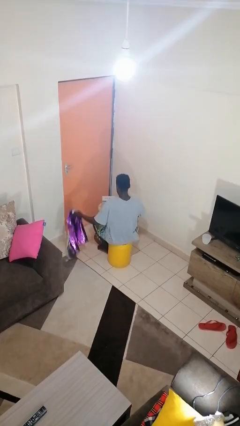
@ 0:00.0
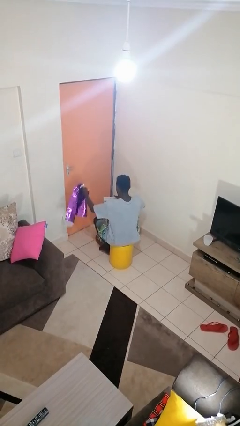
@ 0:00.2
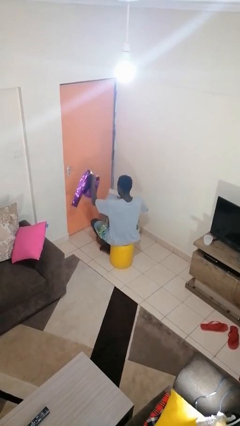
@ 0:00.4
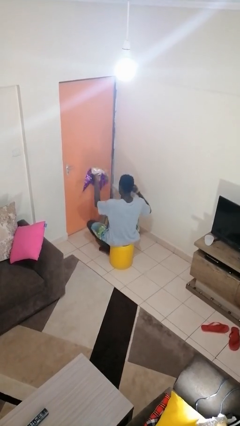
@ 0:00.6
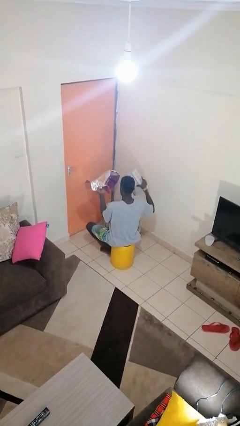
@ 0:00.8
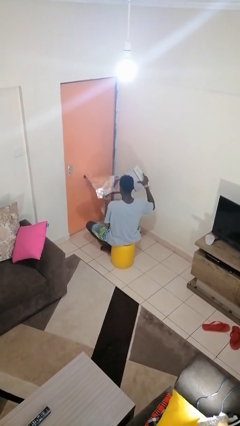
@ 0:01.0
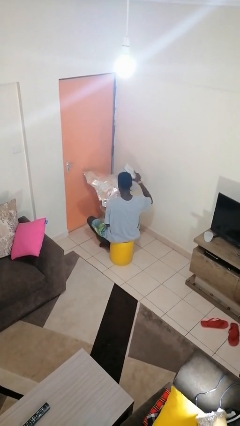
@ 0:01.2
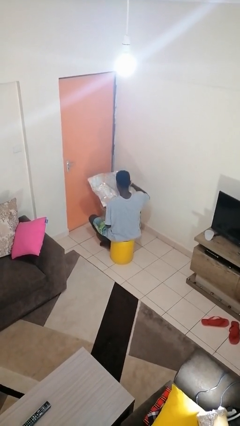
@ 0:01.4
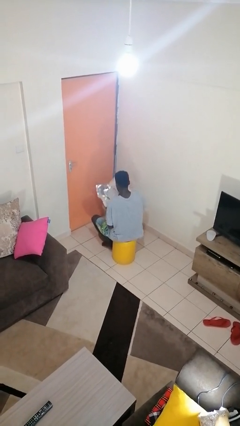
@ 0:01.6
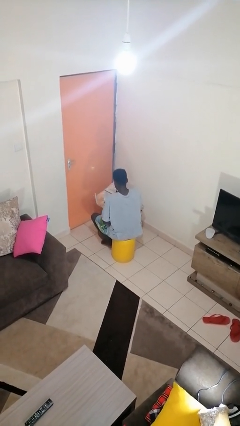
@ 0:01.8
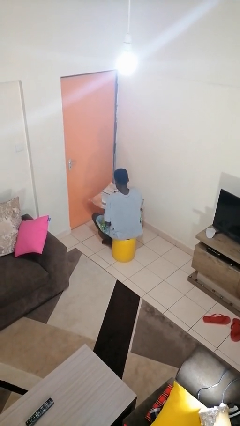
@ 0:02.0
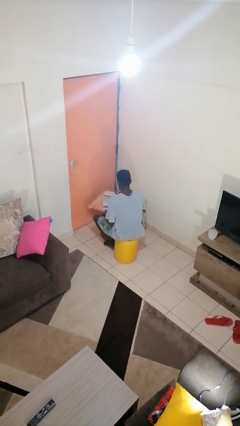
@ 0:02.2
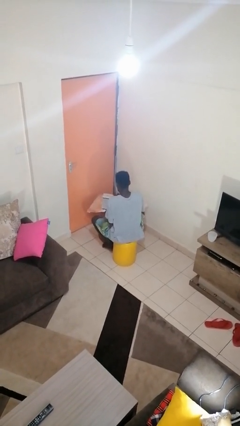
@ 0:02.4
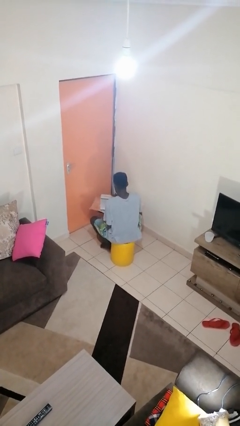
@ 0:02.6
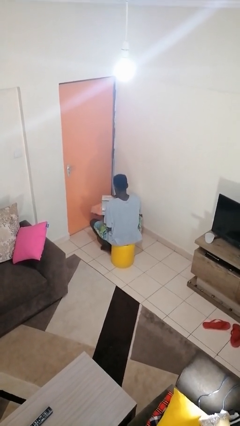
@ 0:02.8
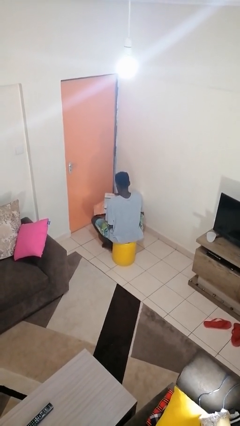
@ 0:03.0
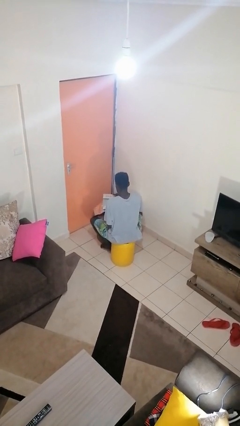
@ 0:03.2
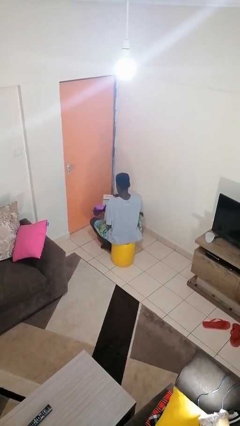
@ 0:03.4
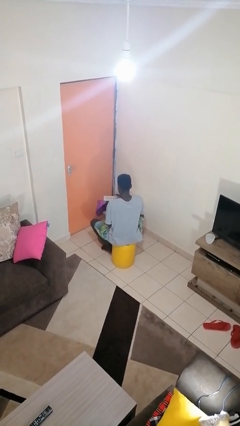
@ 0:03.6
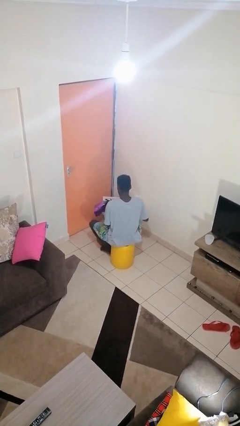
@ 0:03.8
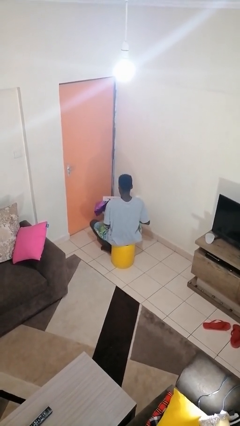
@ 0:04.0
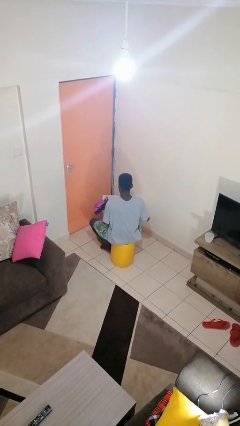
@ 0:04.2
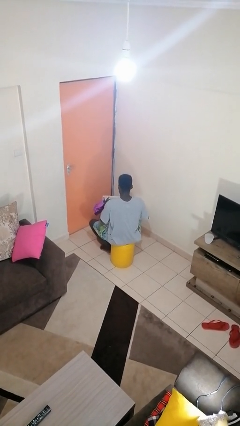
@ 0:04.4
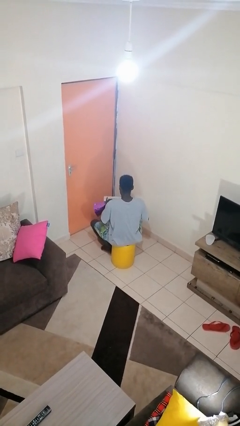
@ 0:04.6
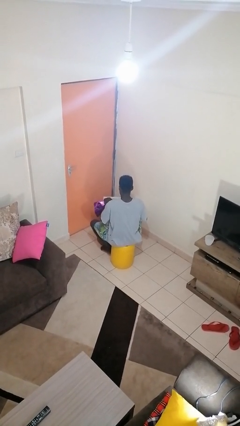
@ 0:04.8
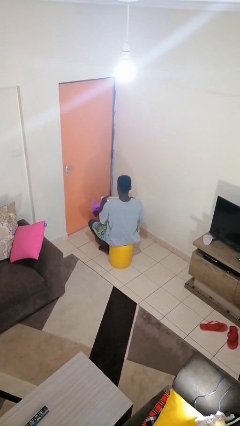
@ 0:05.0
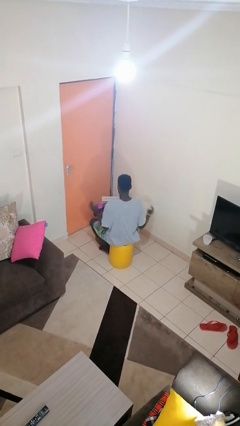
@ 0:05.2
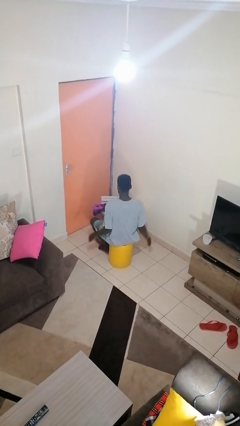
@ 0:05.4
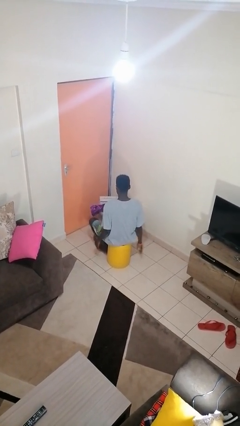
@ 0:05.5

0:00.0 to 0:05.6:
person wraps box

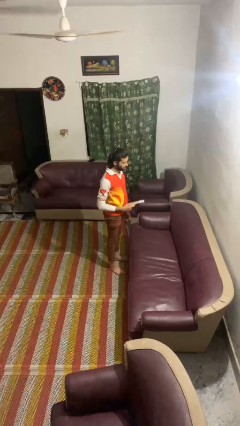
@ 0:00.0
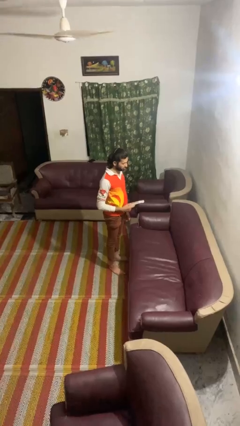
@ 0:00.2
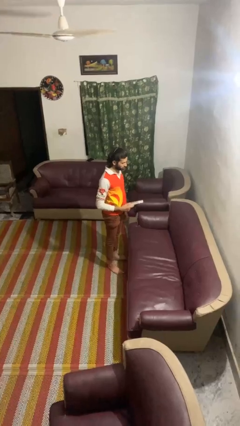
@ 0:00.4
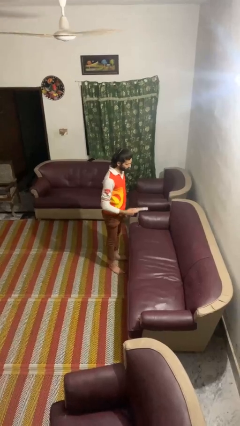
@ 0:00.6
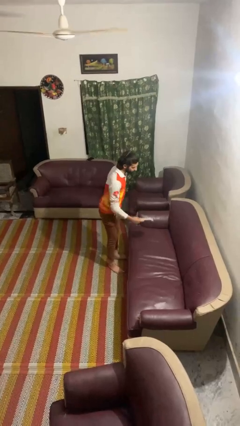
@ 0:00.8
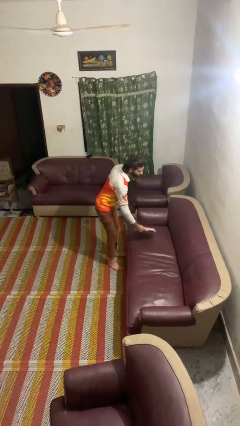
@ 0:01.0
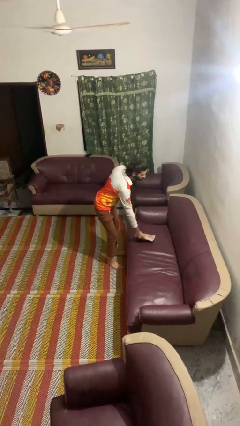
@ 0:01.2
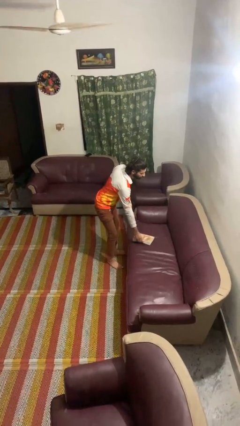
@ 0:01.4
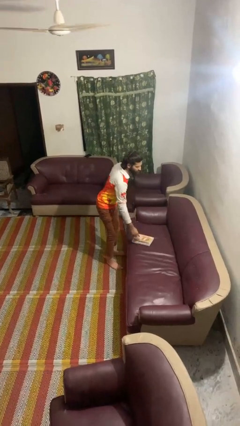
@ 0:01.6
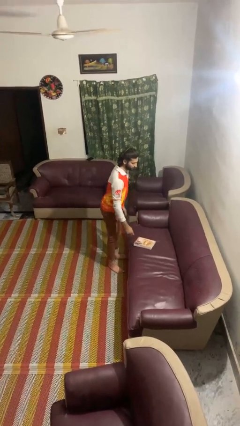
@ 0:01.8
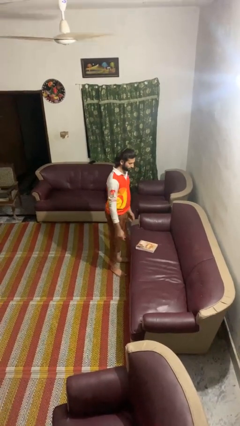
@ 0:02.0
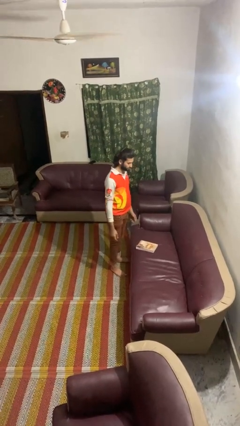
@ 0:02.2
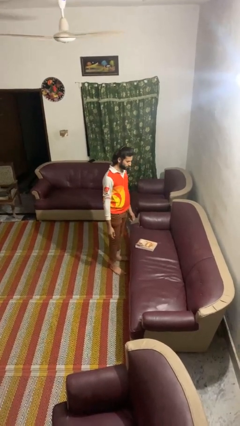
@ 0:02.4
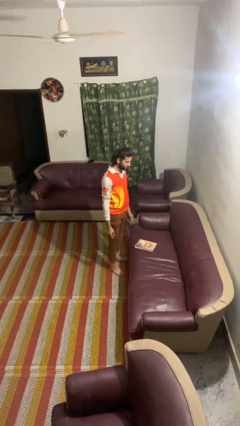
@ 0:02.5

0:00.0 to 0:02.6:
person puts down object on couch

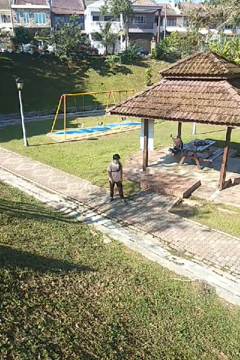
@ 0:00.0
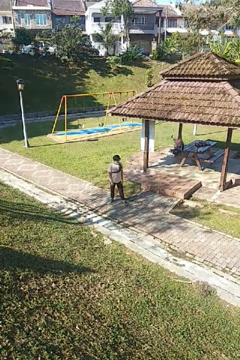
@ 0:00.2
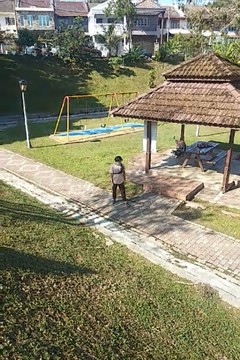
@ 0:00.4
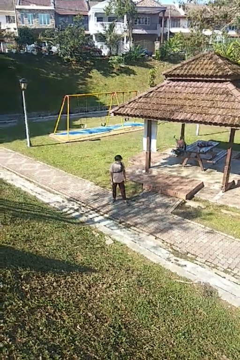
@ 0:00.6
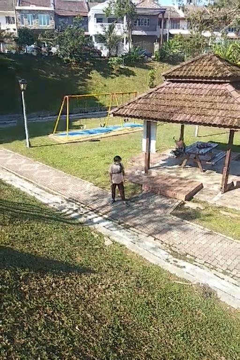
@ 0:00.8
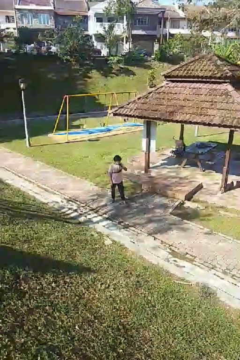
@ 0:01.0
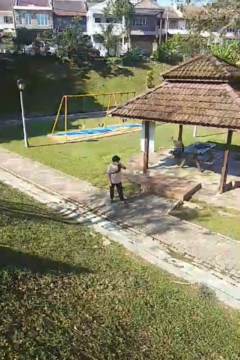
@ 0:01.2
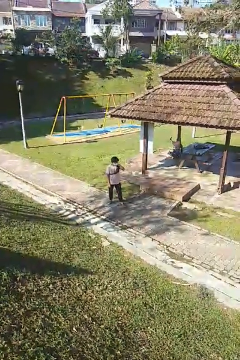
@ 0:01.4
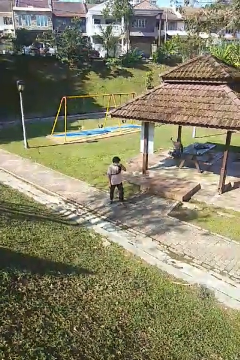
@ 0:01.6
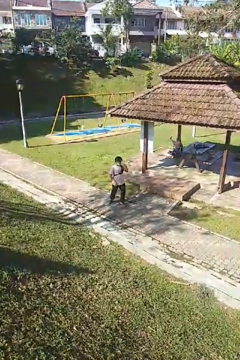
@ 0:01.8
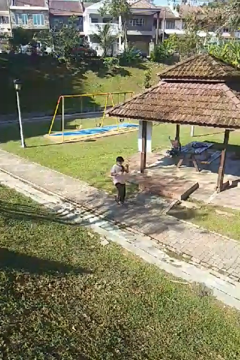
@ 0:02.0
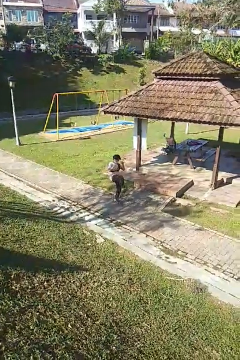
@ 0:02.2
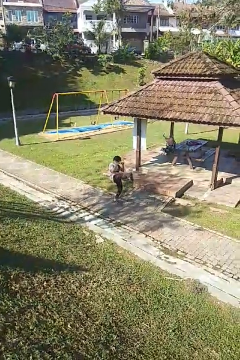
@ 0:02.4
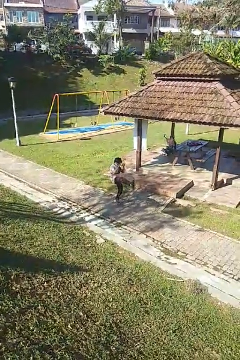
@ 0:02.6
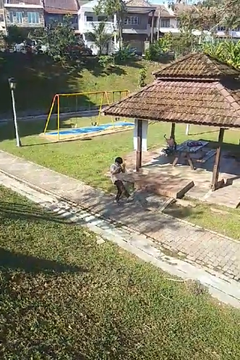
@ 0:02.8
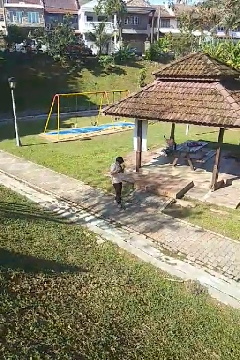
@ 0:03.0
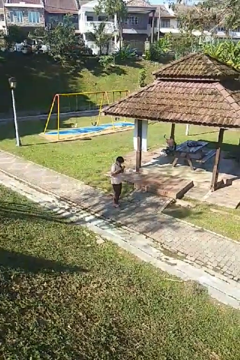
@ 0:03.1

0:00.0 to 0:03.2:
person karate kicks

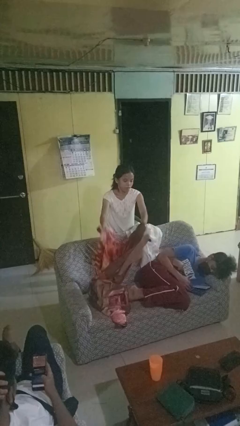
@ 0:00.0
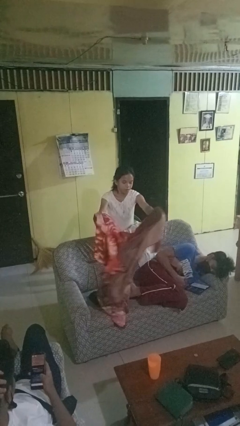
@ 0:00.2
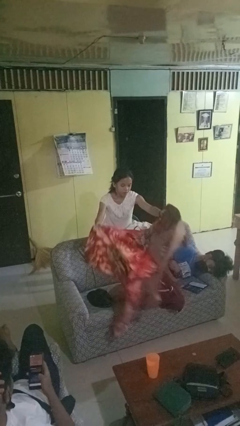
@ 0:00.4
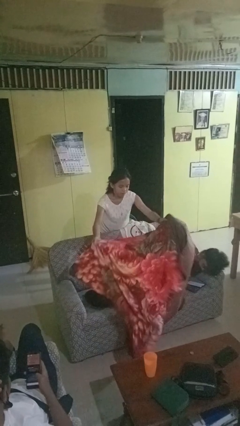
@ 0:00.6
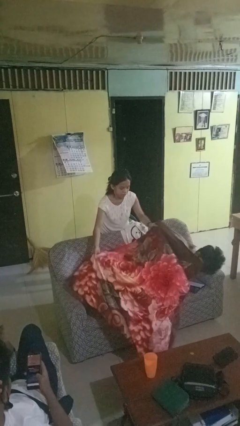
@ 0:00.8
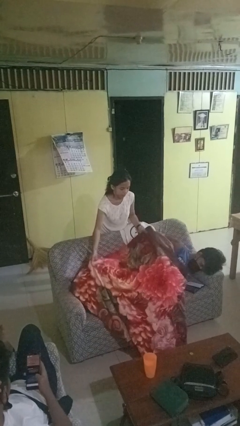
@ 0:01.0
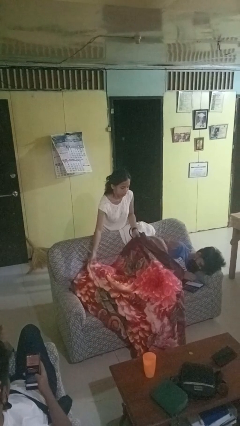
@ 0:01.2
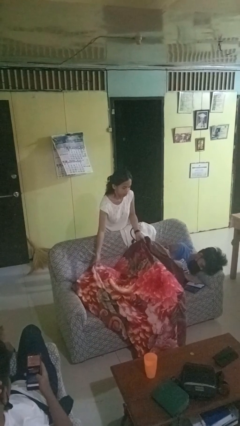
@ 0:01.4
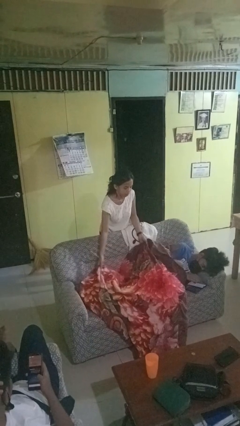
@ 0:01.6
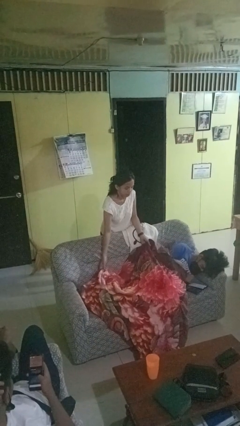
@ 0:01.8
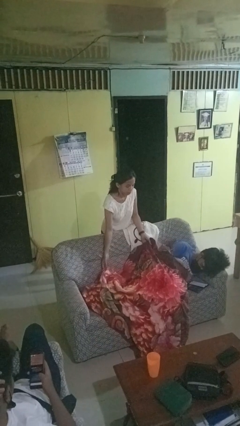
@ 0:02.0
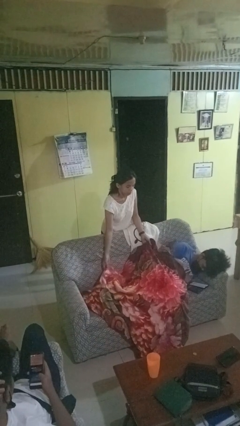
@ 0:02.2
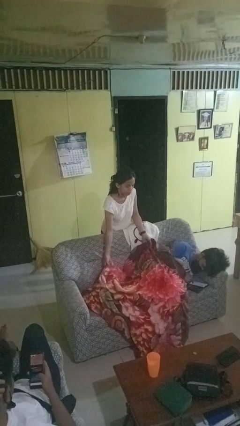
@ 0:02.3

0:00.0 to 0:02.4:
person covers friend with blanket

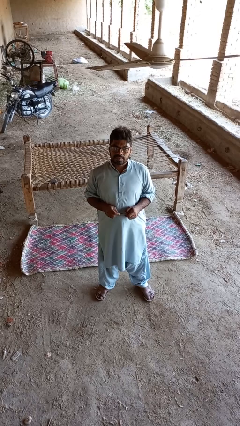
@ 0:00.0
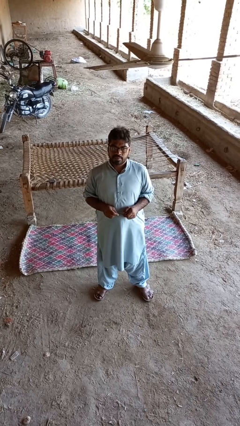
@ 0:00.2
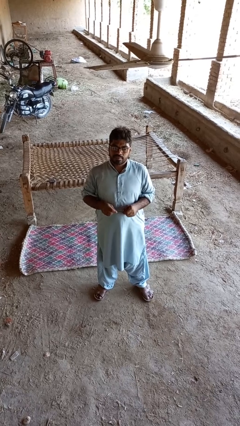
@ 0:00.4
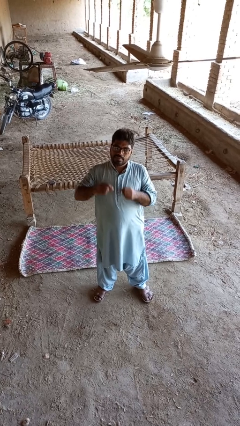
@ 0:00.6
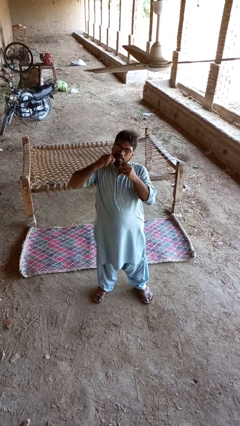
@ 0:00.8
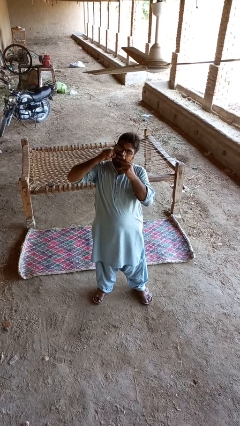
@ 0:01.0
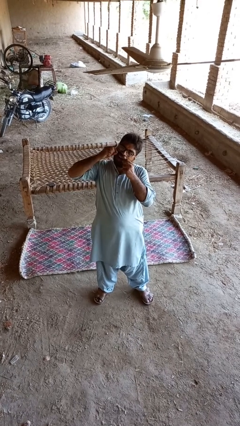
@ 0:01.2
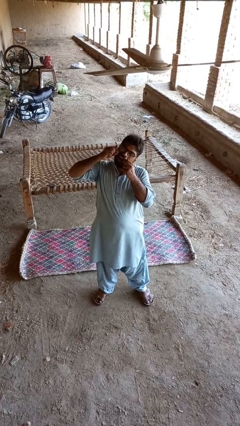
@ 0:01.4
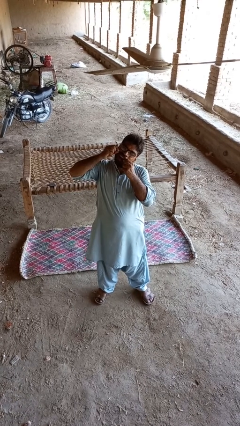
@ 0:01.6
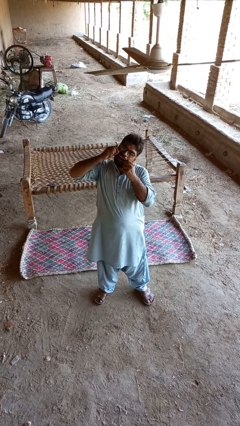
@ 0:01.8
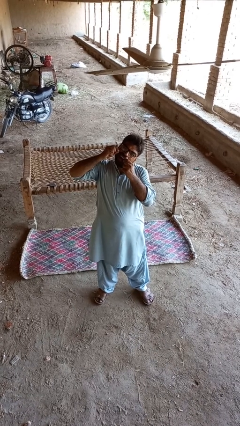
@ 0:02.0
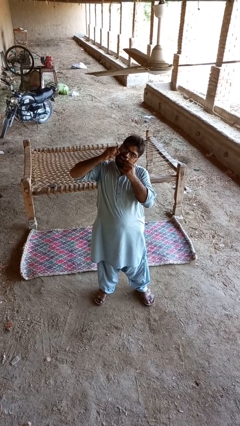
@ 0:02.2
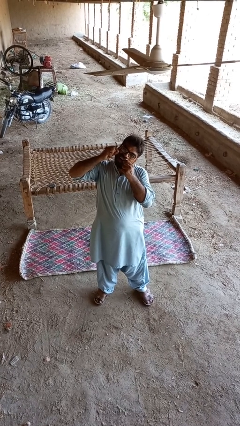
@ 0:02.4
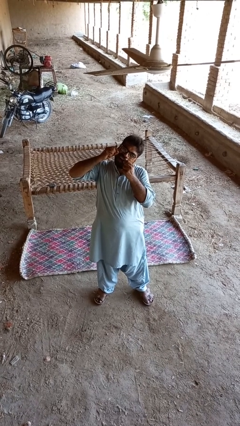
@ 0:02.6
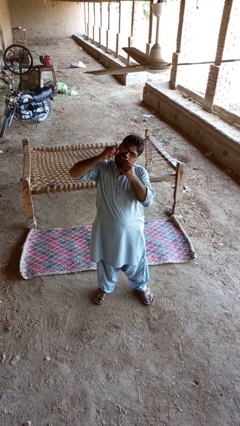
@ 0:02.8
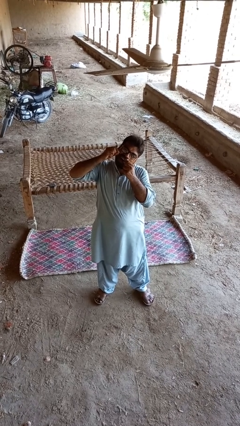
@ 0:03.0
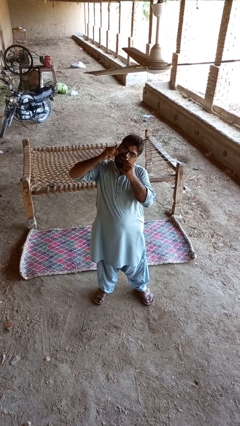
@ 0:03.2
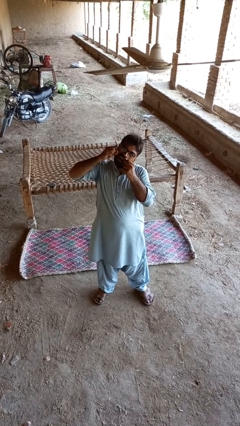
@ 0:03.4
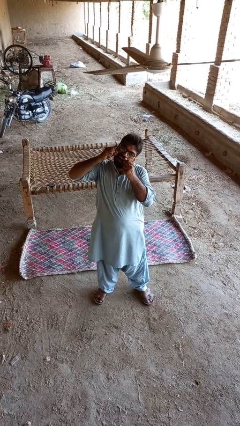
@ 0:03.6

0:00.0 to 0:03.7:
person flosses

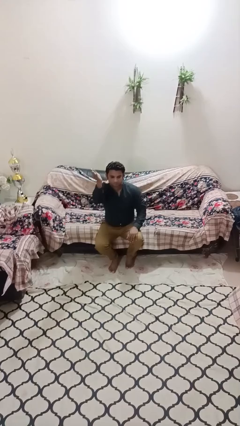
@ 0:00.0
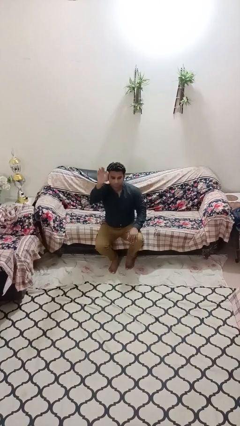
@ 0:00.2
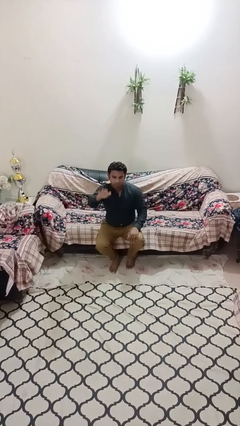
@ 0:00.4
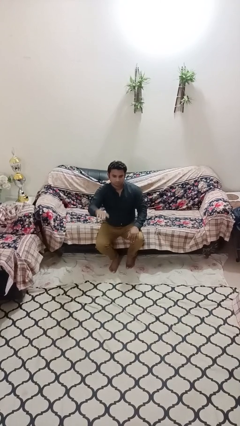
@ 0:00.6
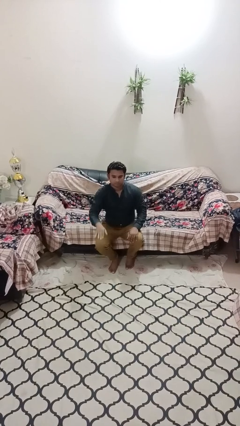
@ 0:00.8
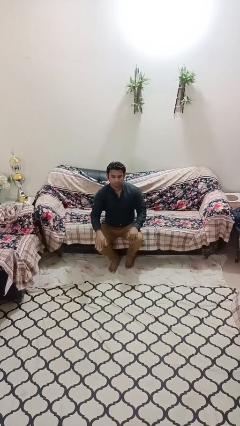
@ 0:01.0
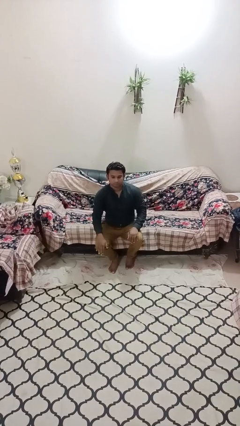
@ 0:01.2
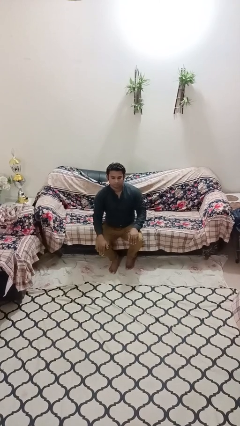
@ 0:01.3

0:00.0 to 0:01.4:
person gestures swipe down
